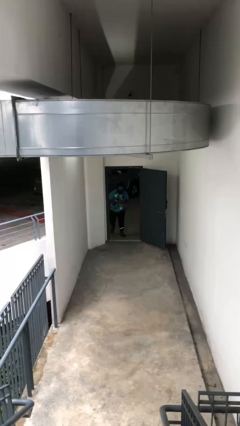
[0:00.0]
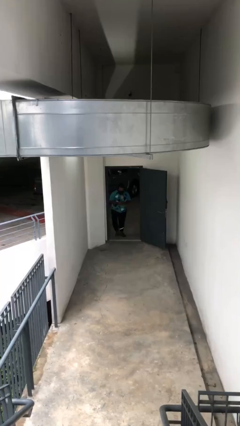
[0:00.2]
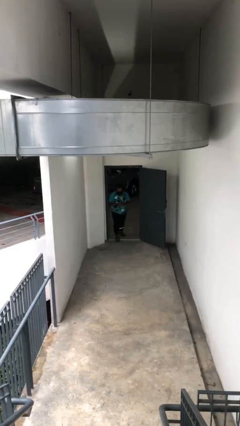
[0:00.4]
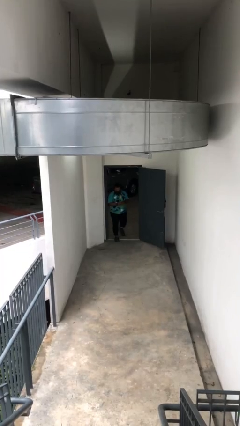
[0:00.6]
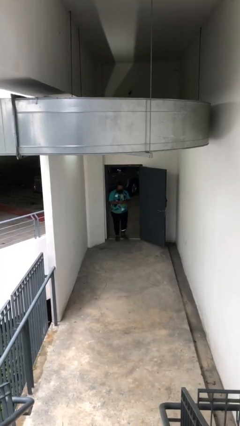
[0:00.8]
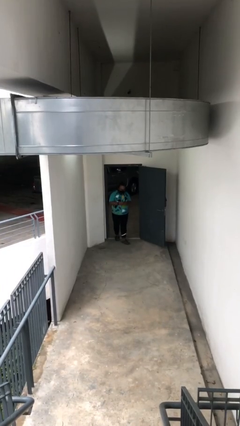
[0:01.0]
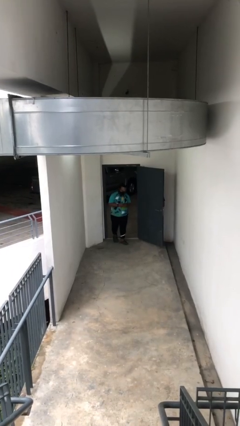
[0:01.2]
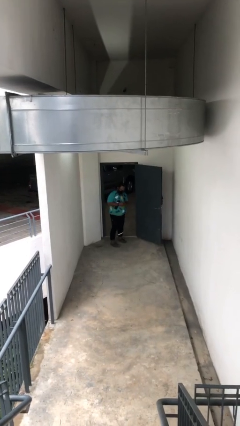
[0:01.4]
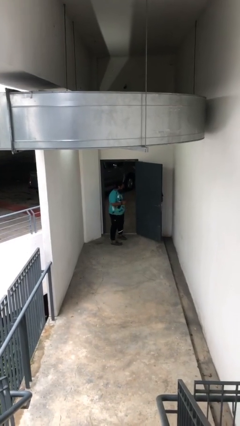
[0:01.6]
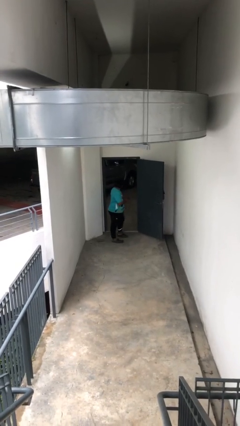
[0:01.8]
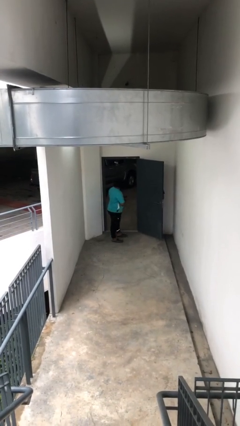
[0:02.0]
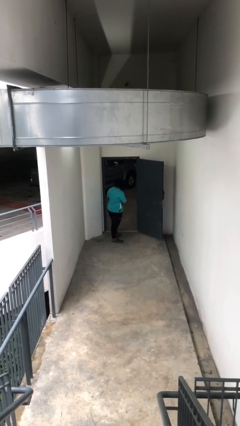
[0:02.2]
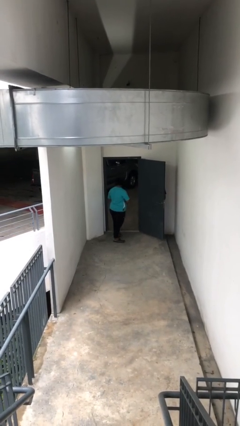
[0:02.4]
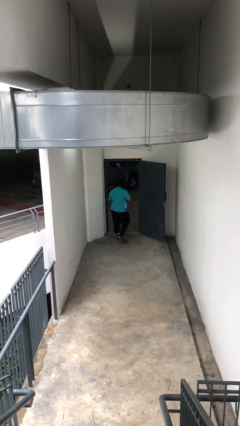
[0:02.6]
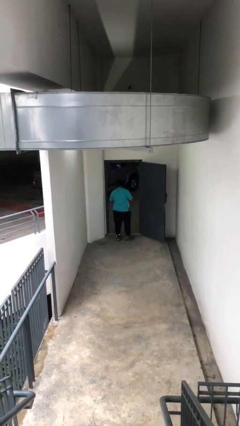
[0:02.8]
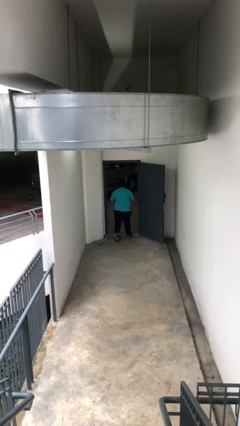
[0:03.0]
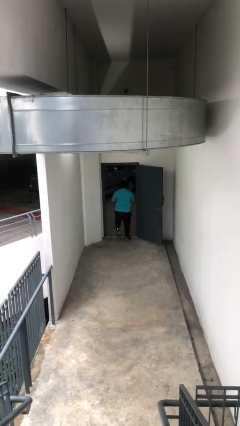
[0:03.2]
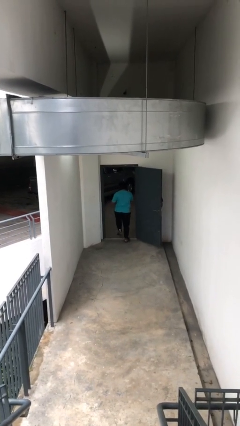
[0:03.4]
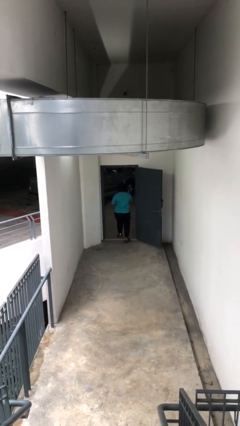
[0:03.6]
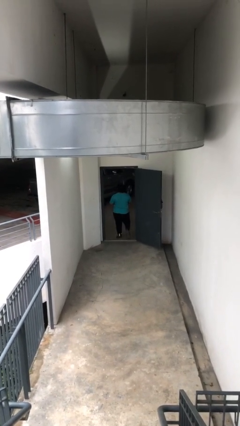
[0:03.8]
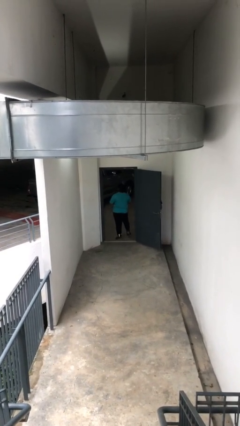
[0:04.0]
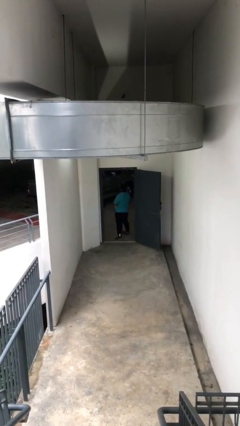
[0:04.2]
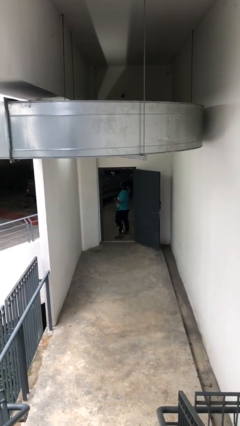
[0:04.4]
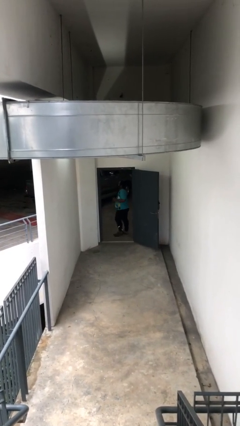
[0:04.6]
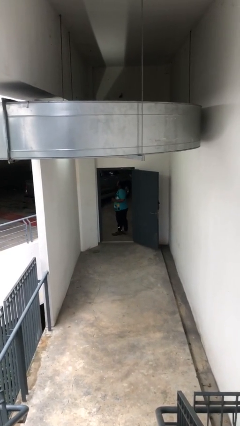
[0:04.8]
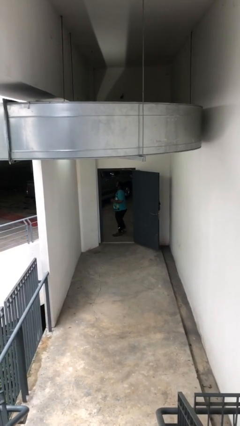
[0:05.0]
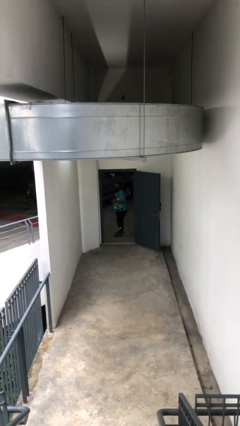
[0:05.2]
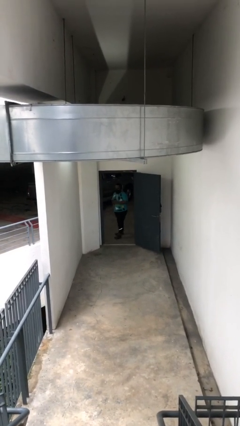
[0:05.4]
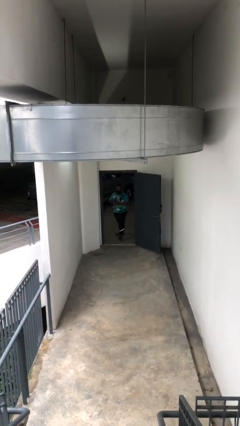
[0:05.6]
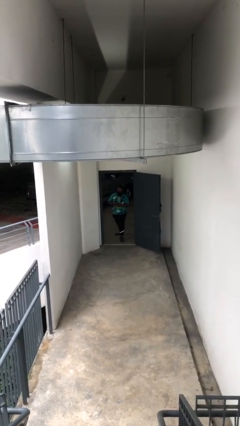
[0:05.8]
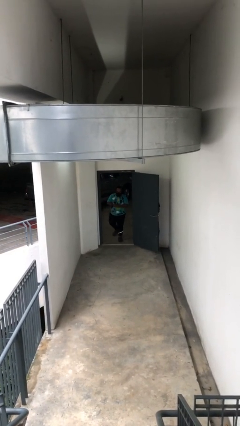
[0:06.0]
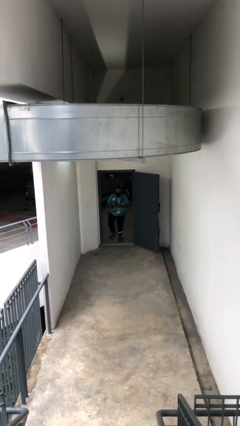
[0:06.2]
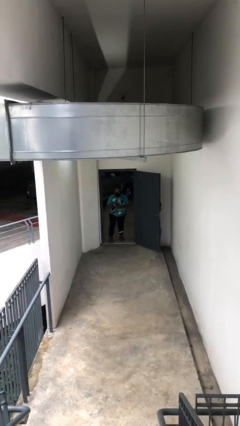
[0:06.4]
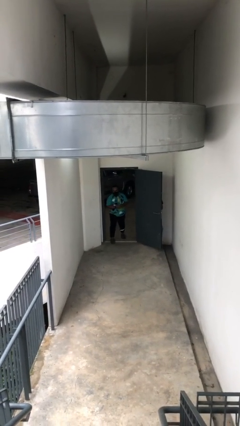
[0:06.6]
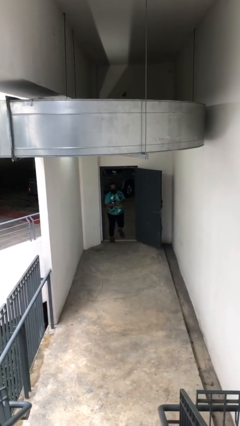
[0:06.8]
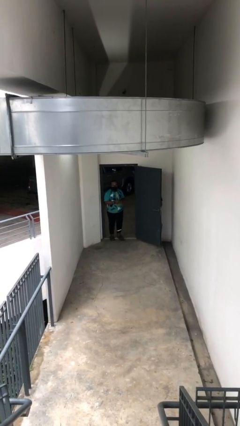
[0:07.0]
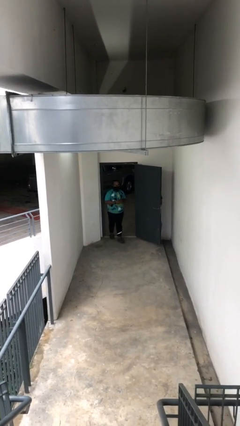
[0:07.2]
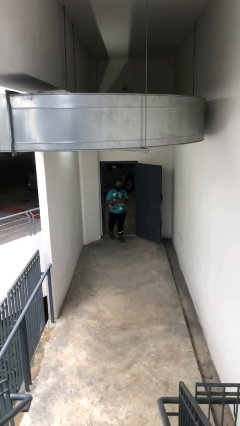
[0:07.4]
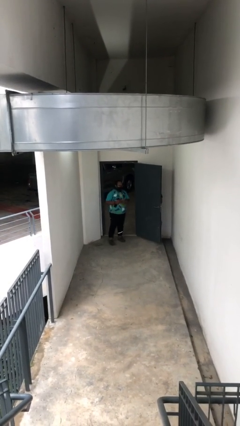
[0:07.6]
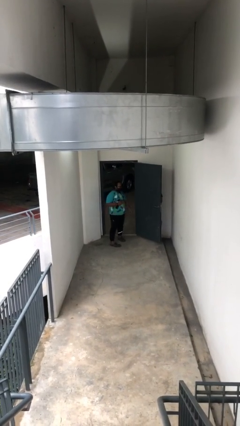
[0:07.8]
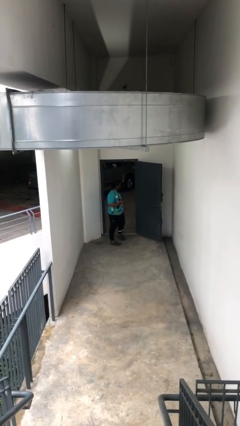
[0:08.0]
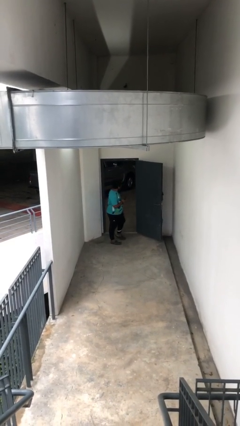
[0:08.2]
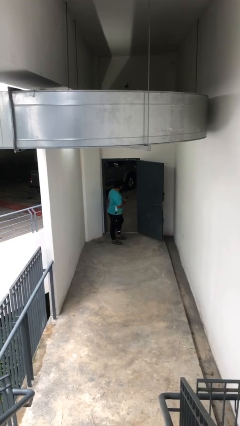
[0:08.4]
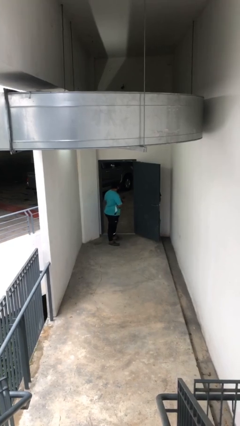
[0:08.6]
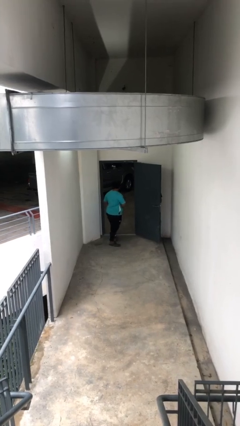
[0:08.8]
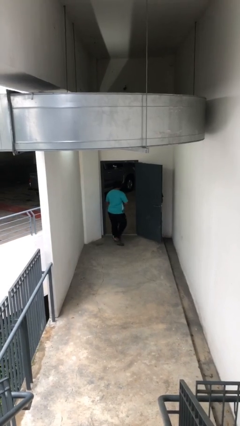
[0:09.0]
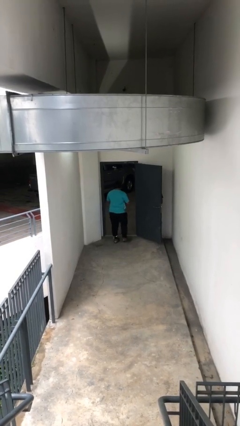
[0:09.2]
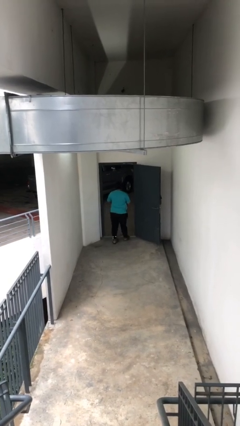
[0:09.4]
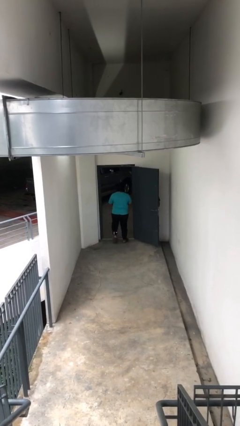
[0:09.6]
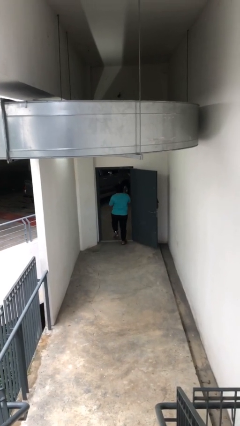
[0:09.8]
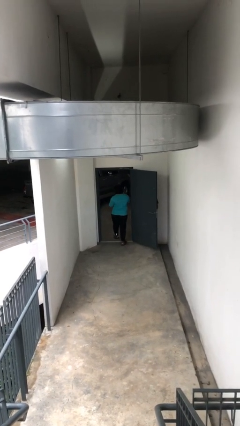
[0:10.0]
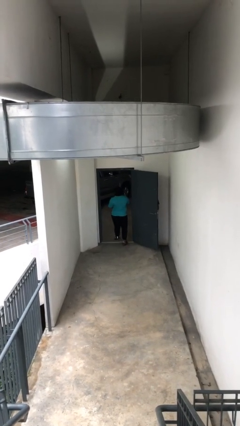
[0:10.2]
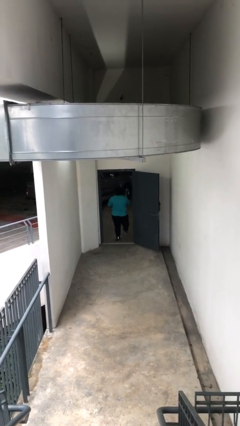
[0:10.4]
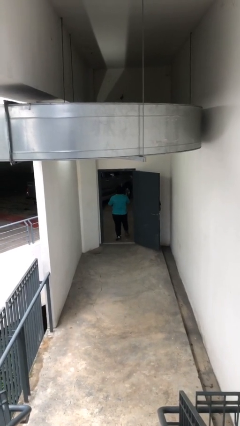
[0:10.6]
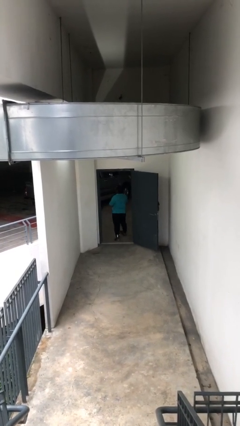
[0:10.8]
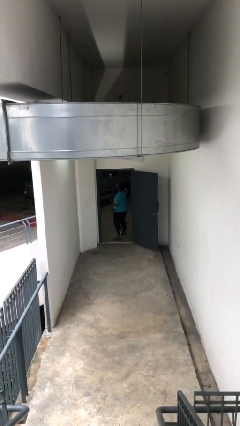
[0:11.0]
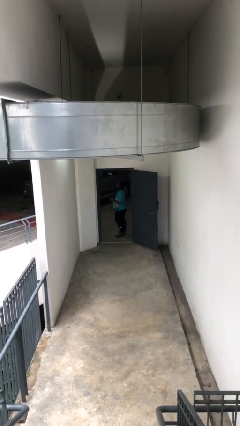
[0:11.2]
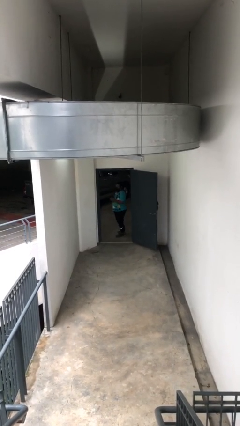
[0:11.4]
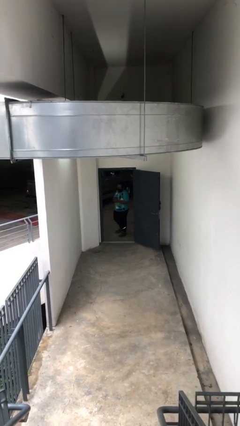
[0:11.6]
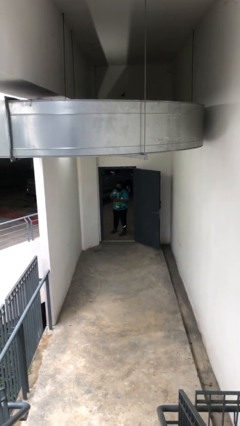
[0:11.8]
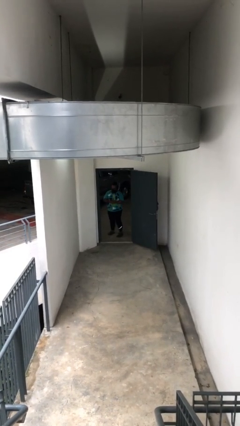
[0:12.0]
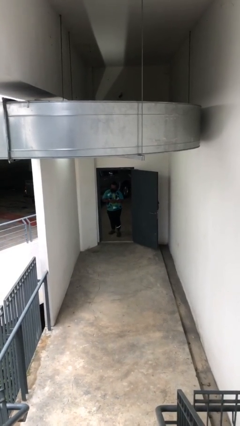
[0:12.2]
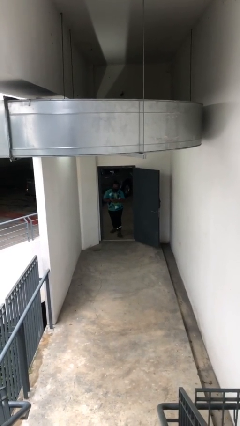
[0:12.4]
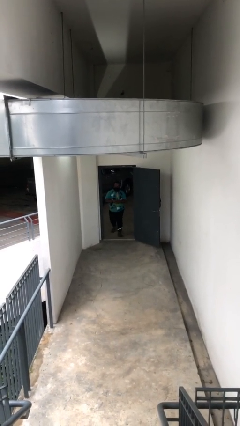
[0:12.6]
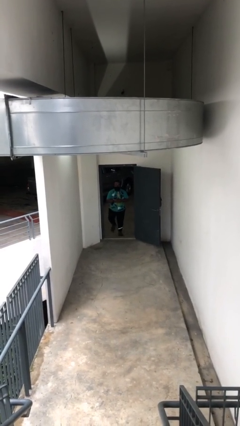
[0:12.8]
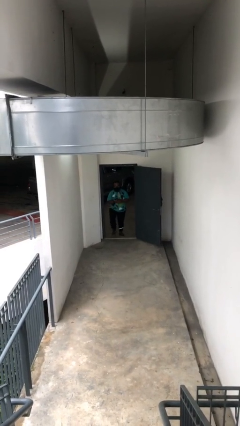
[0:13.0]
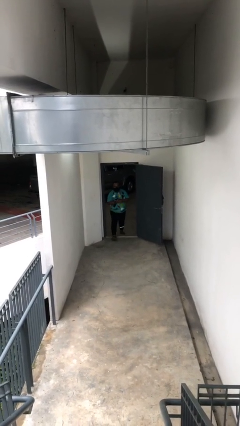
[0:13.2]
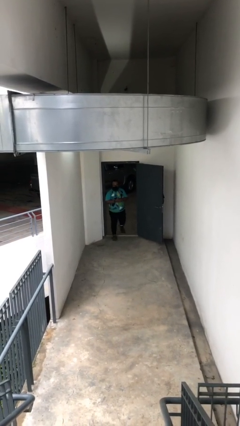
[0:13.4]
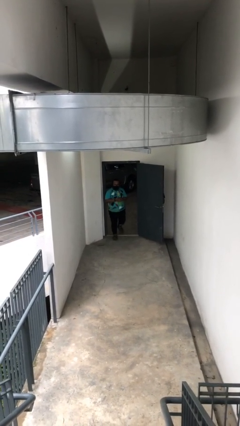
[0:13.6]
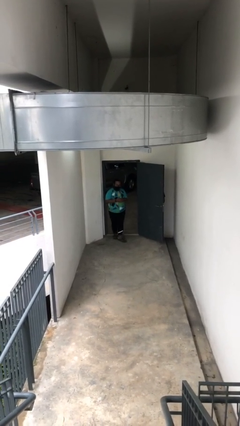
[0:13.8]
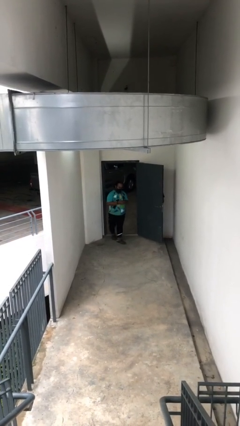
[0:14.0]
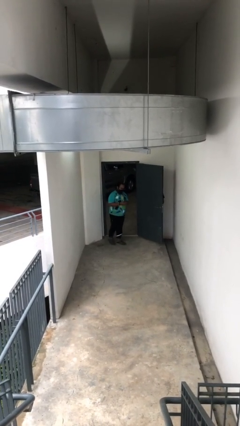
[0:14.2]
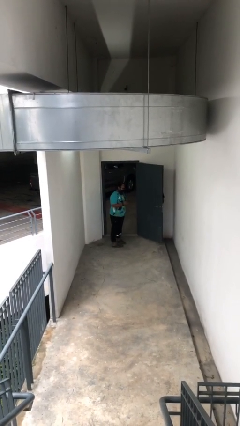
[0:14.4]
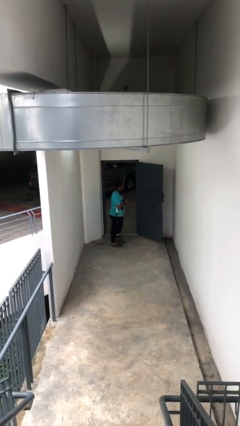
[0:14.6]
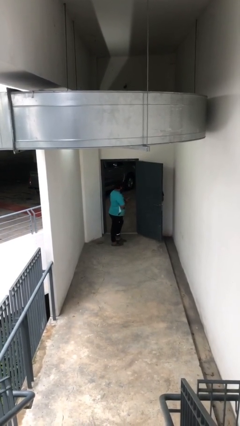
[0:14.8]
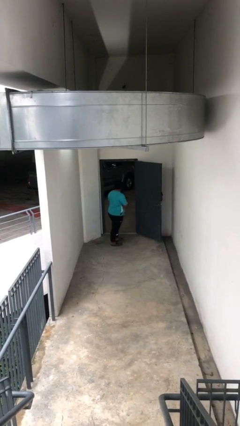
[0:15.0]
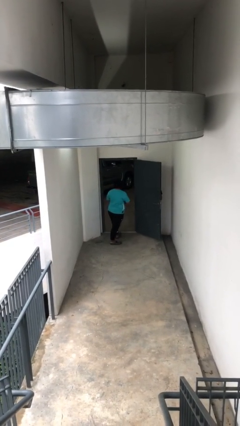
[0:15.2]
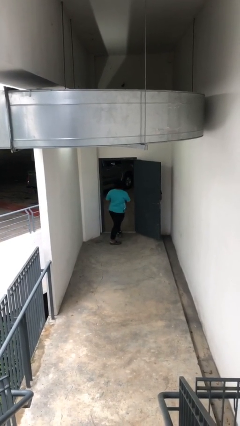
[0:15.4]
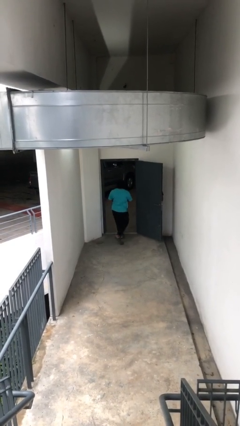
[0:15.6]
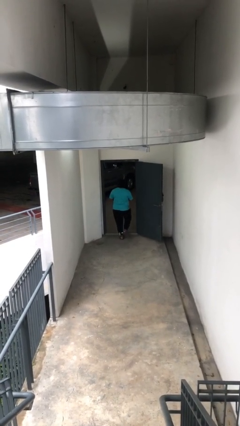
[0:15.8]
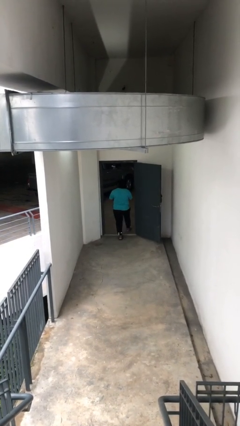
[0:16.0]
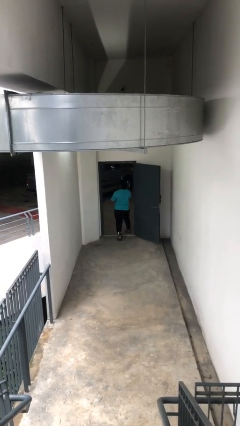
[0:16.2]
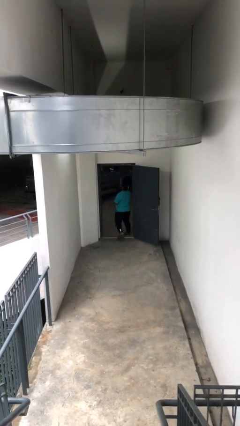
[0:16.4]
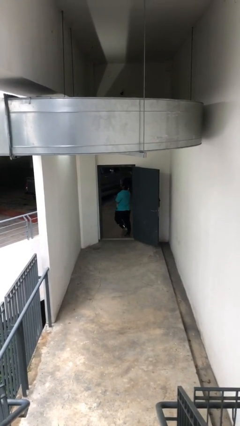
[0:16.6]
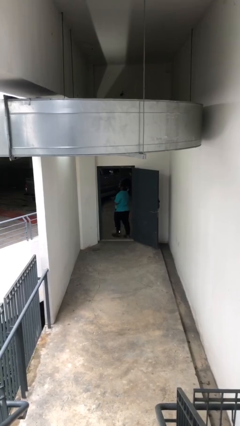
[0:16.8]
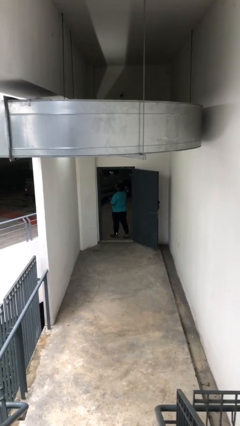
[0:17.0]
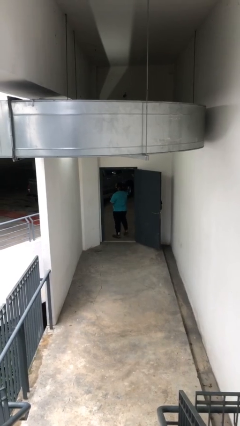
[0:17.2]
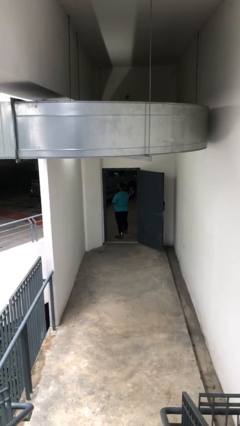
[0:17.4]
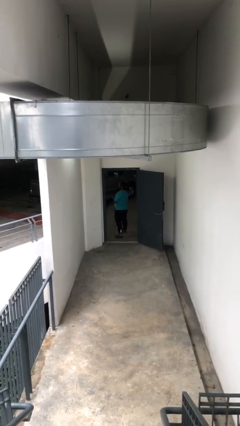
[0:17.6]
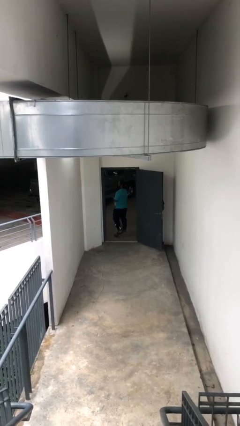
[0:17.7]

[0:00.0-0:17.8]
person texts on phone

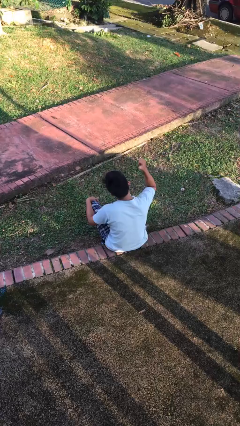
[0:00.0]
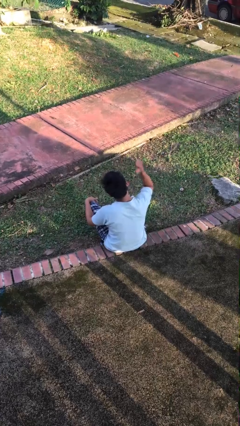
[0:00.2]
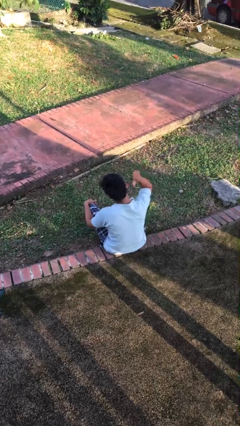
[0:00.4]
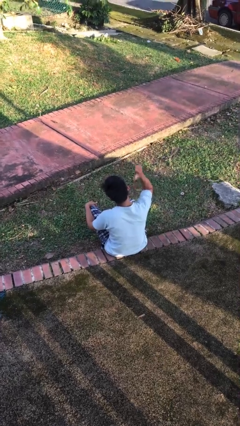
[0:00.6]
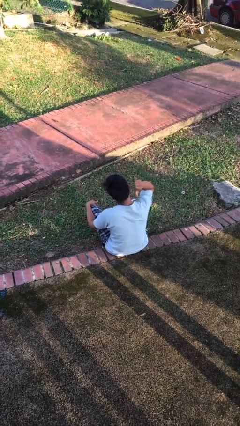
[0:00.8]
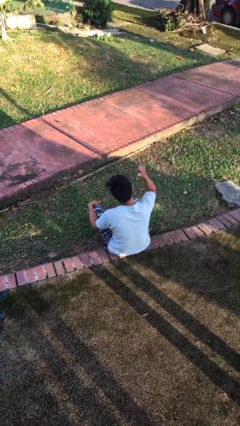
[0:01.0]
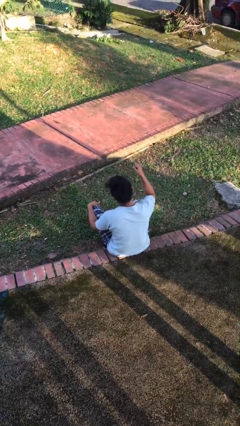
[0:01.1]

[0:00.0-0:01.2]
person gestures behind me
